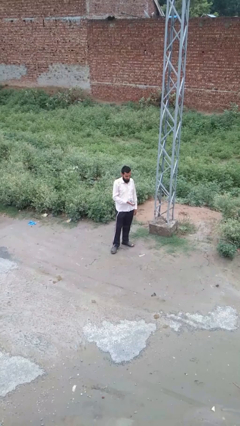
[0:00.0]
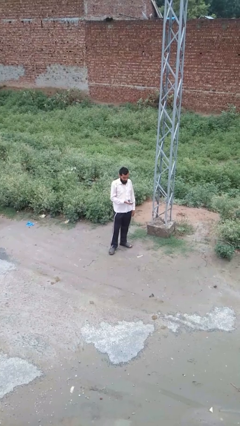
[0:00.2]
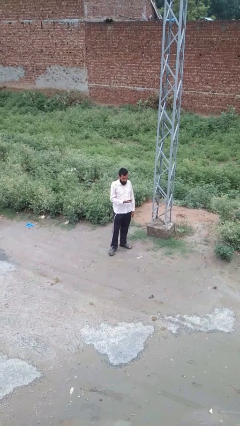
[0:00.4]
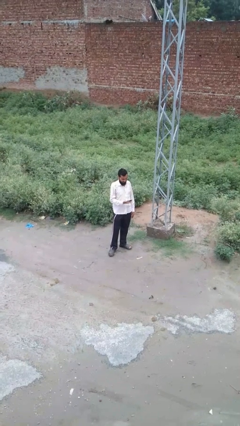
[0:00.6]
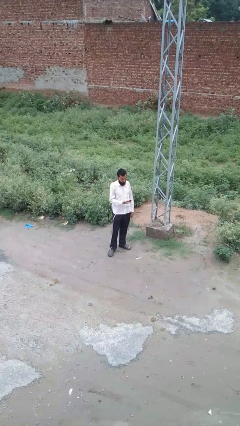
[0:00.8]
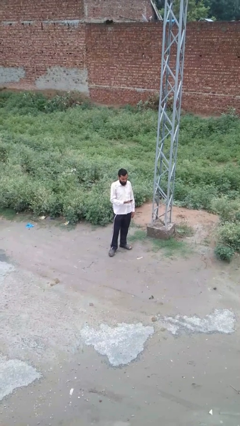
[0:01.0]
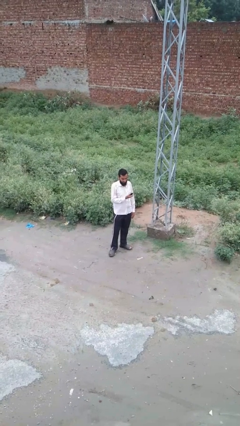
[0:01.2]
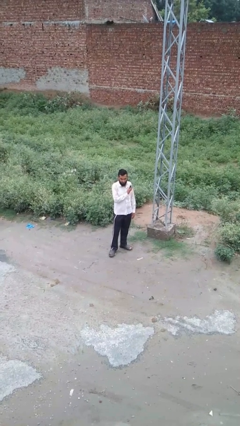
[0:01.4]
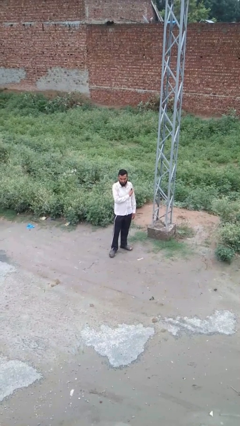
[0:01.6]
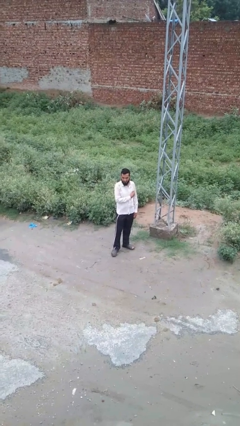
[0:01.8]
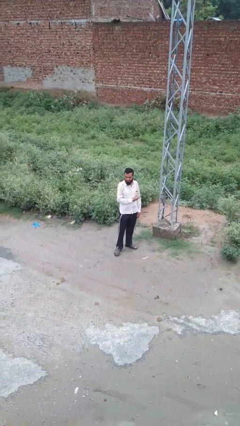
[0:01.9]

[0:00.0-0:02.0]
person puts phone into pocket

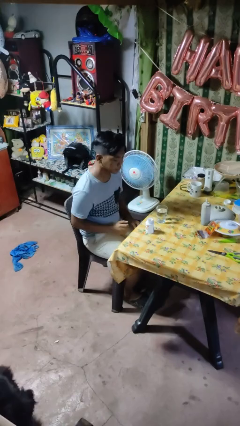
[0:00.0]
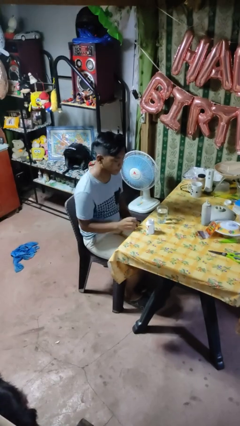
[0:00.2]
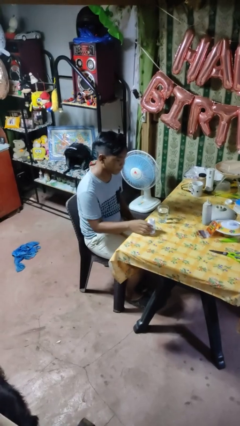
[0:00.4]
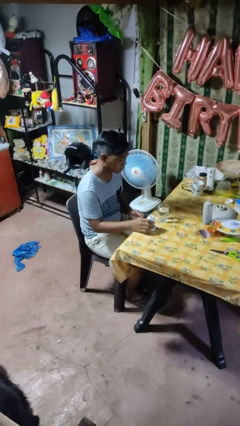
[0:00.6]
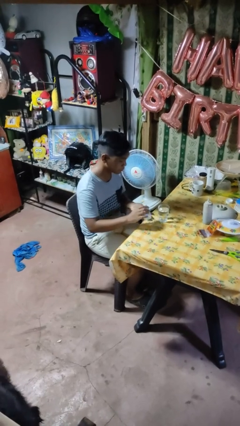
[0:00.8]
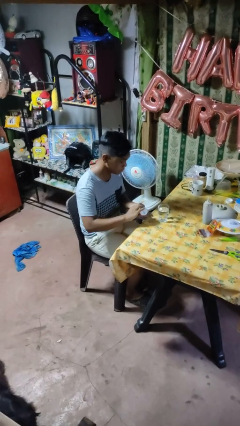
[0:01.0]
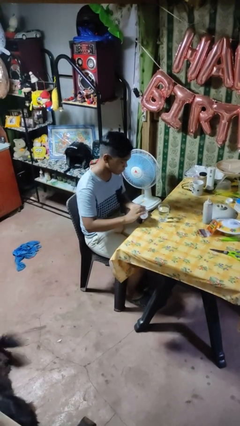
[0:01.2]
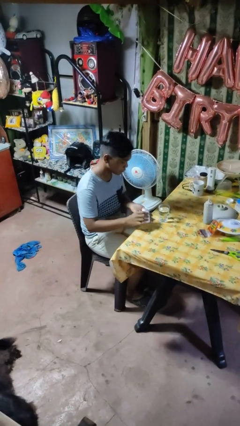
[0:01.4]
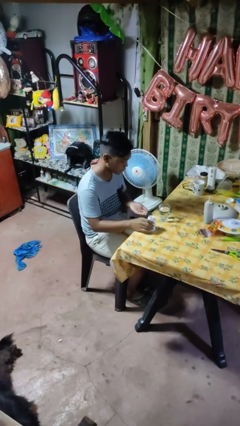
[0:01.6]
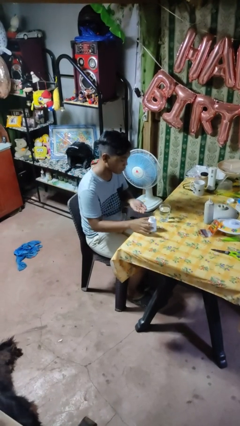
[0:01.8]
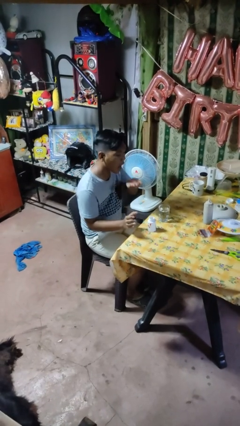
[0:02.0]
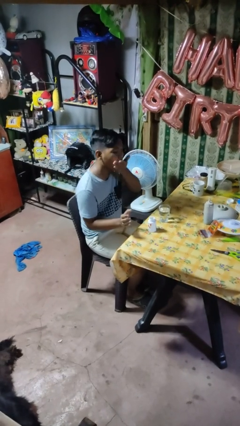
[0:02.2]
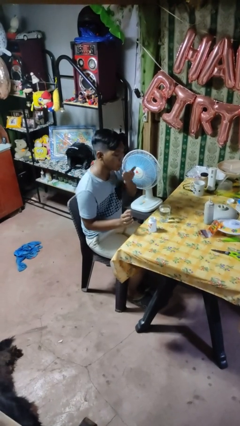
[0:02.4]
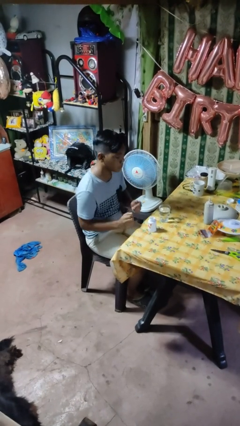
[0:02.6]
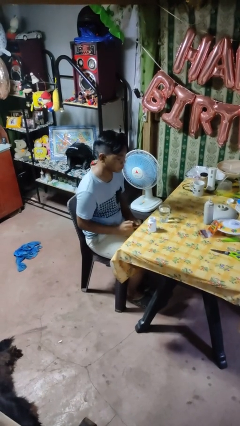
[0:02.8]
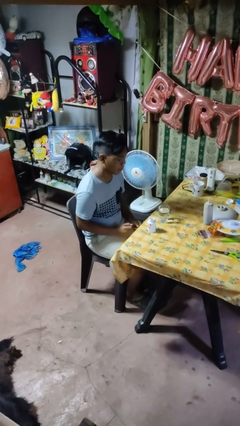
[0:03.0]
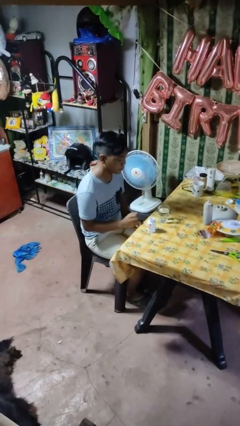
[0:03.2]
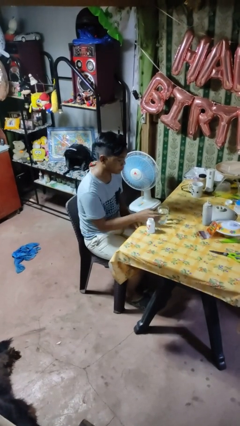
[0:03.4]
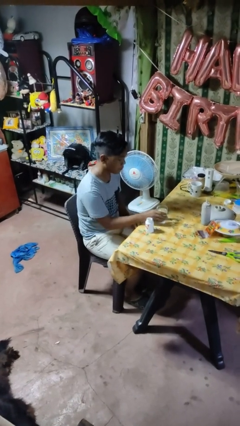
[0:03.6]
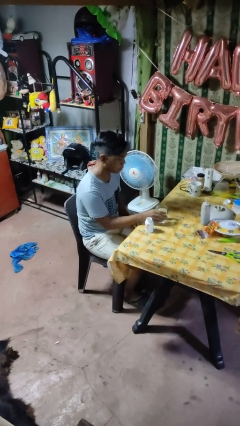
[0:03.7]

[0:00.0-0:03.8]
person takes medicine pills

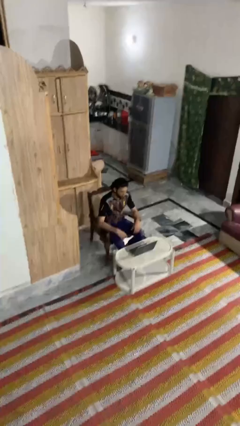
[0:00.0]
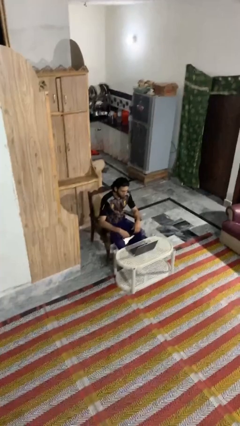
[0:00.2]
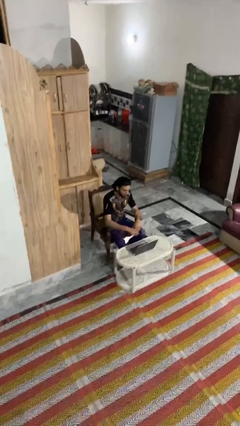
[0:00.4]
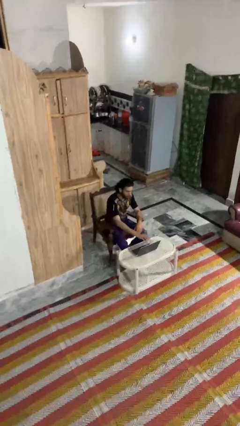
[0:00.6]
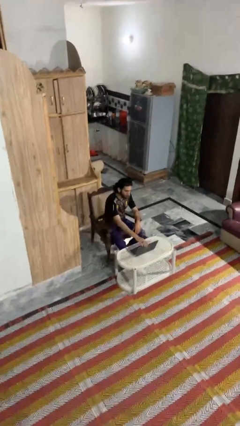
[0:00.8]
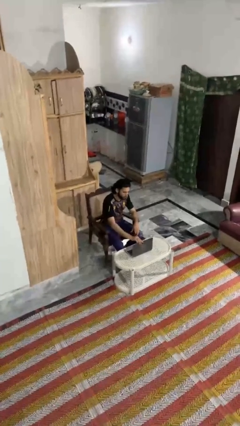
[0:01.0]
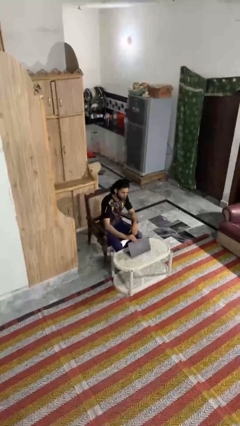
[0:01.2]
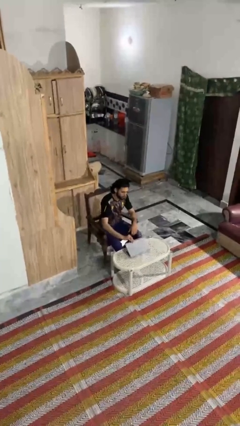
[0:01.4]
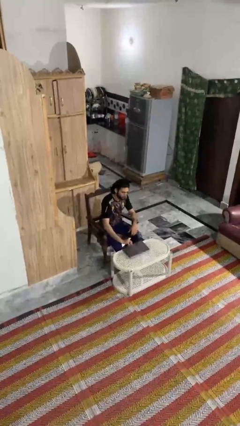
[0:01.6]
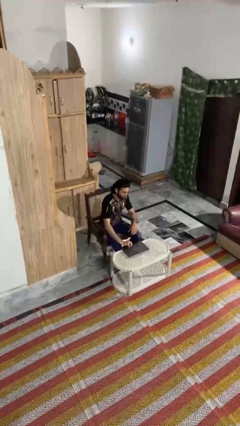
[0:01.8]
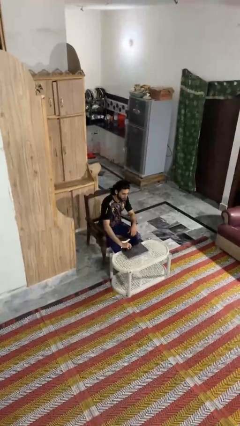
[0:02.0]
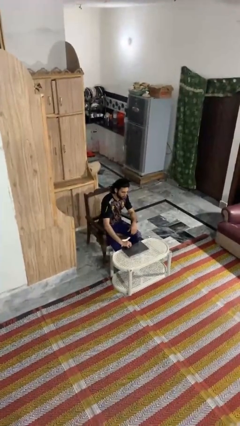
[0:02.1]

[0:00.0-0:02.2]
person closes laptop

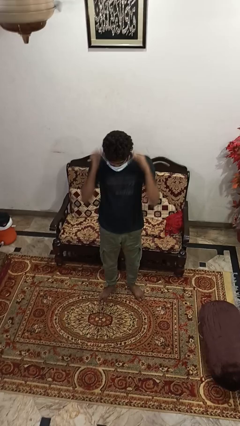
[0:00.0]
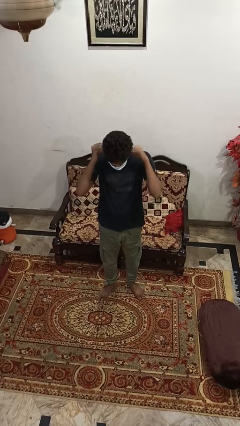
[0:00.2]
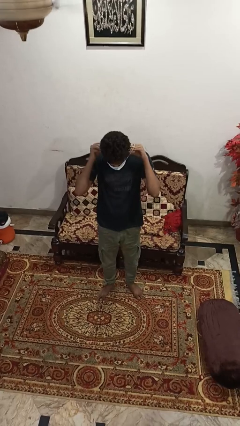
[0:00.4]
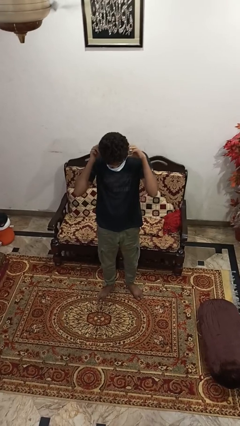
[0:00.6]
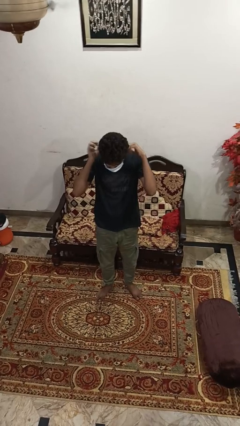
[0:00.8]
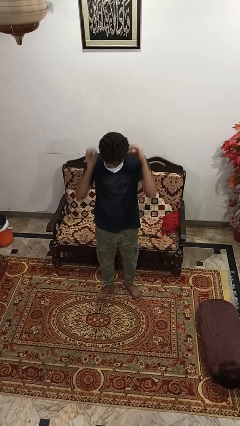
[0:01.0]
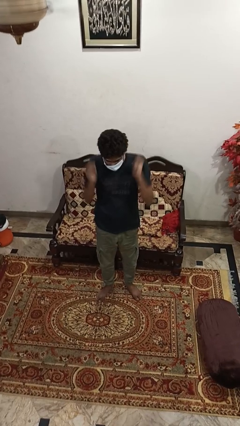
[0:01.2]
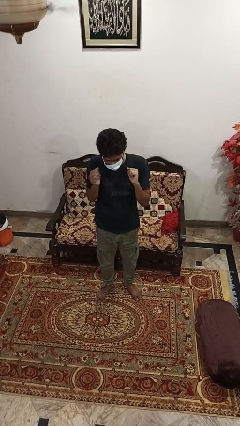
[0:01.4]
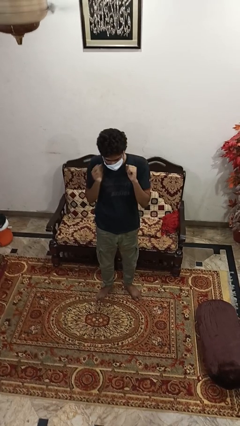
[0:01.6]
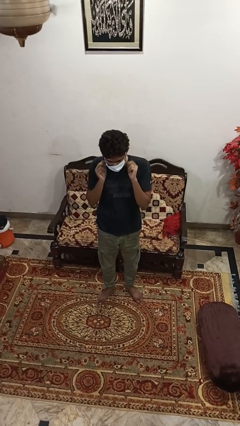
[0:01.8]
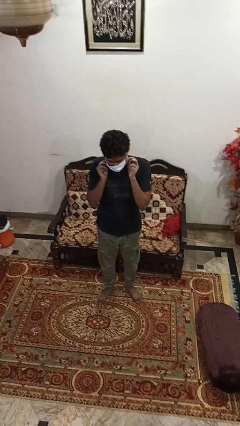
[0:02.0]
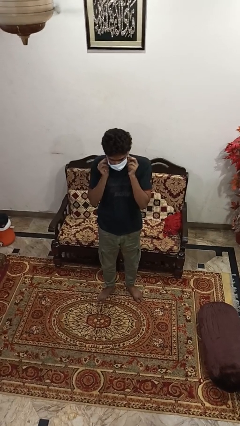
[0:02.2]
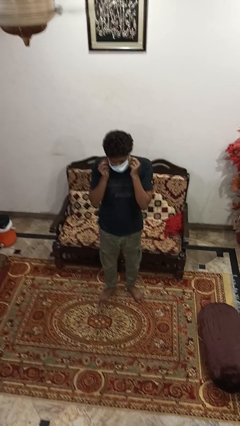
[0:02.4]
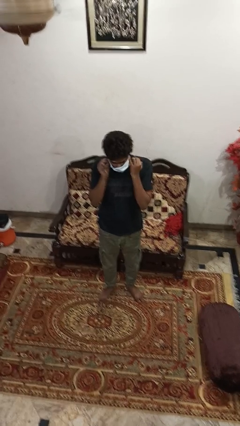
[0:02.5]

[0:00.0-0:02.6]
person puts on facemask

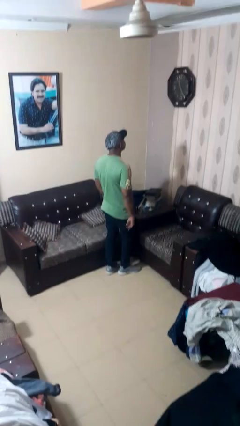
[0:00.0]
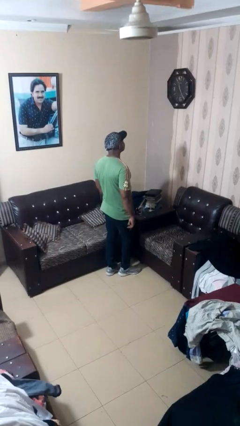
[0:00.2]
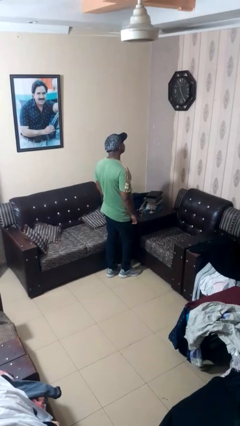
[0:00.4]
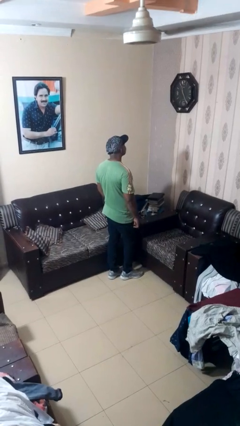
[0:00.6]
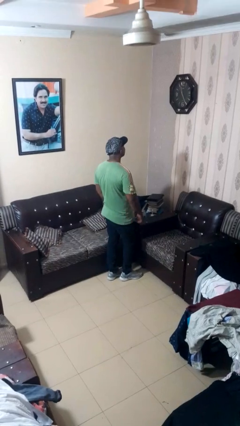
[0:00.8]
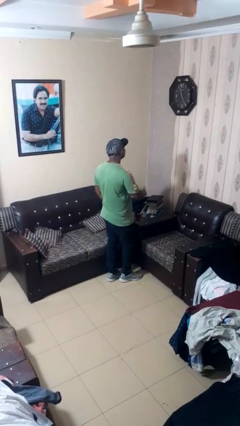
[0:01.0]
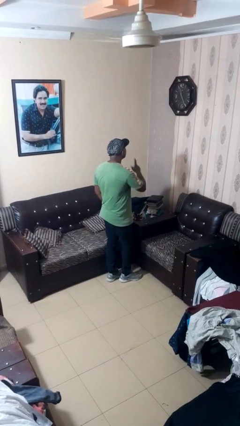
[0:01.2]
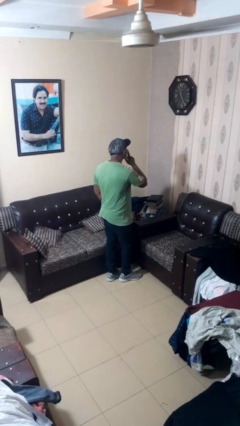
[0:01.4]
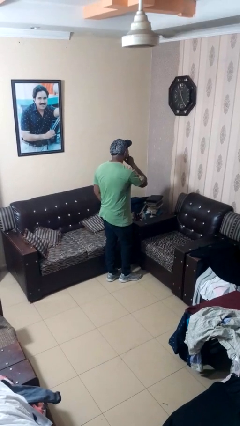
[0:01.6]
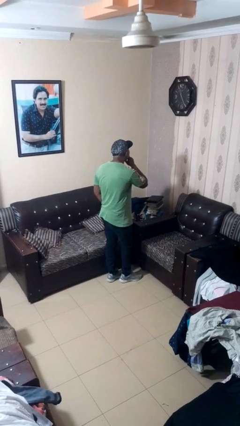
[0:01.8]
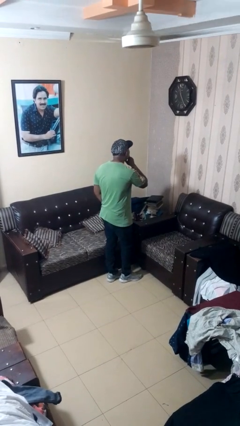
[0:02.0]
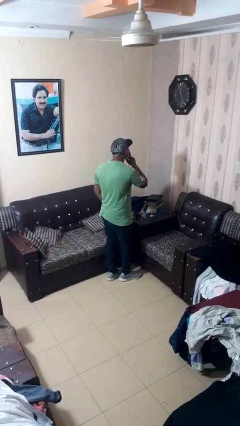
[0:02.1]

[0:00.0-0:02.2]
person gestures be quiet

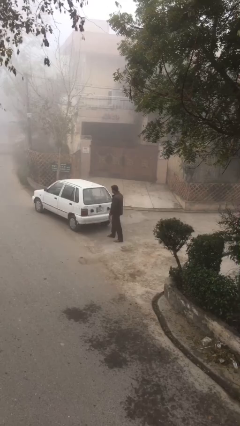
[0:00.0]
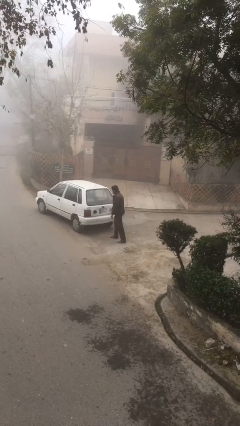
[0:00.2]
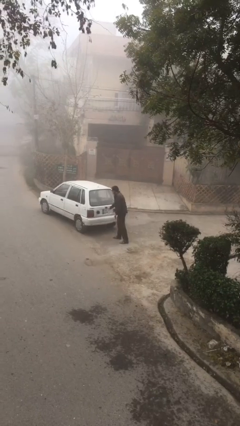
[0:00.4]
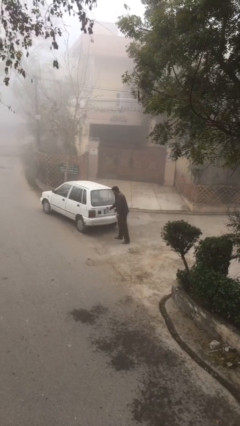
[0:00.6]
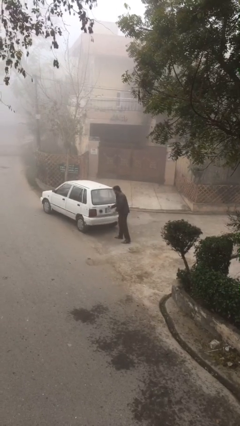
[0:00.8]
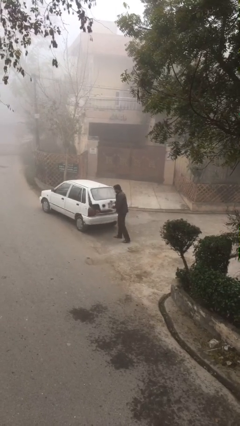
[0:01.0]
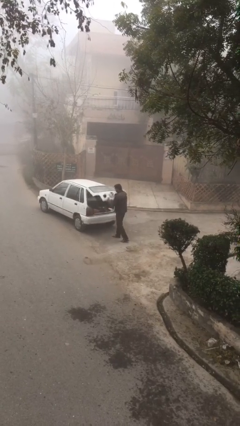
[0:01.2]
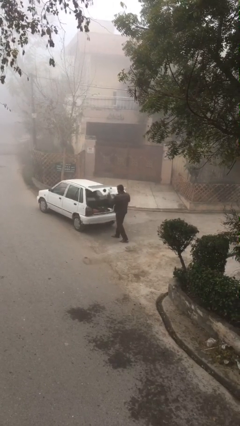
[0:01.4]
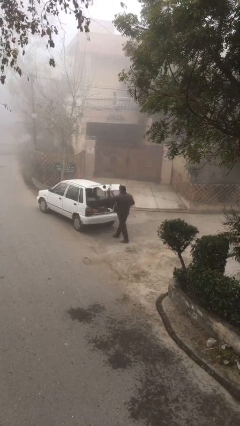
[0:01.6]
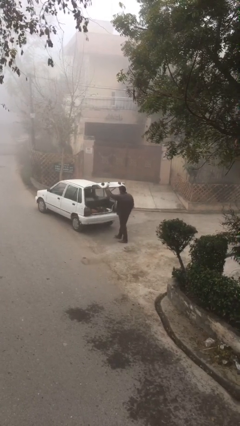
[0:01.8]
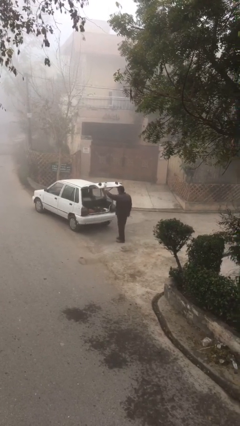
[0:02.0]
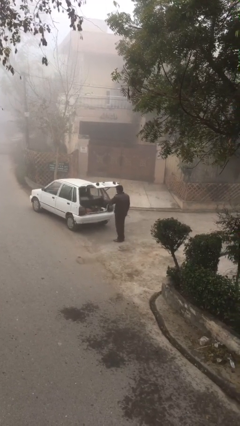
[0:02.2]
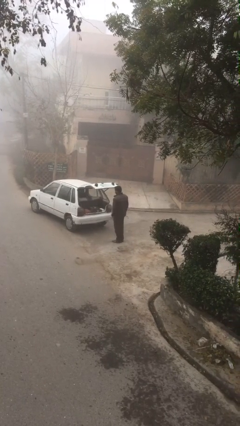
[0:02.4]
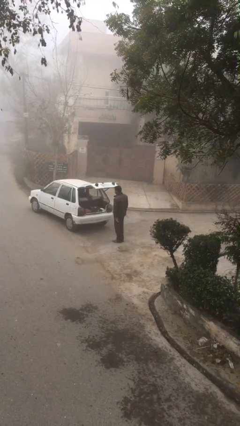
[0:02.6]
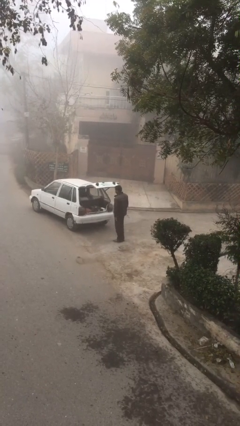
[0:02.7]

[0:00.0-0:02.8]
person opens car trunk

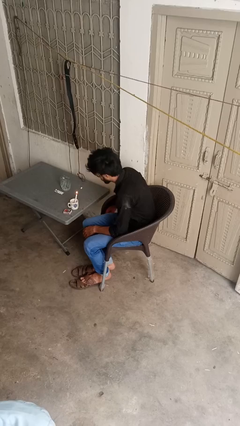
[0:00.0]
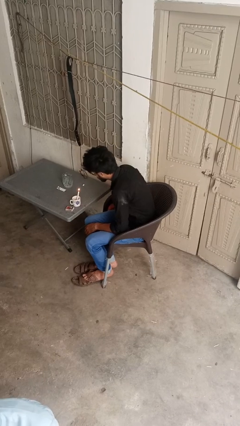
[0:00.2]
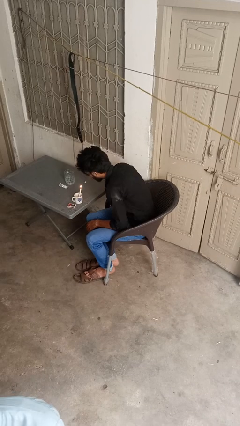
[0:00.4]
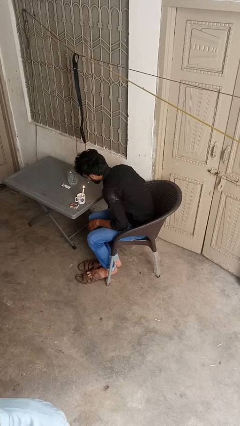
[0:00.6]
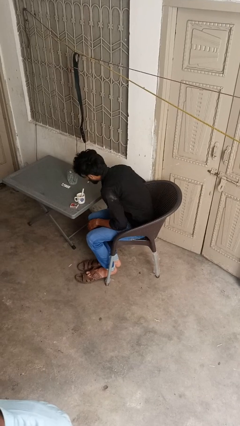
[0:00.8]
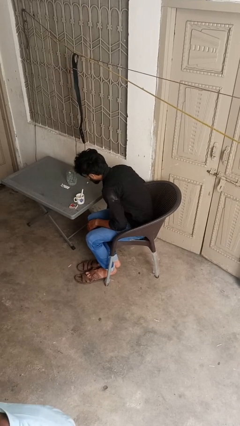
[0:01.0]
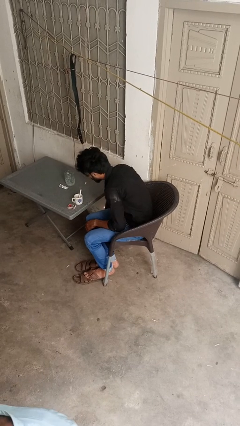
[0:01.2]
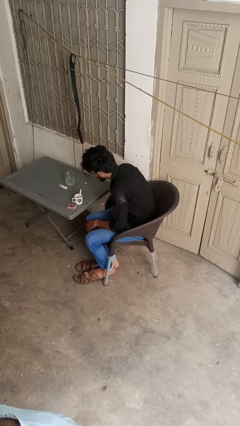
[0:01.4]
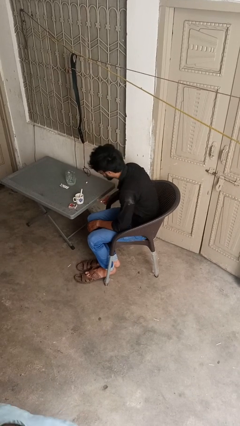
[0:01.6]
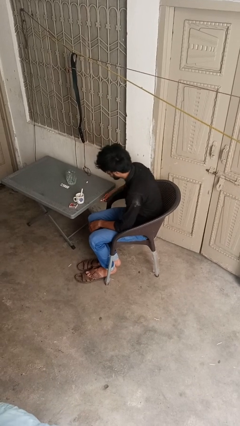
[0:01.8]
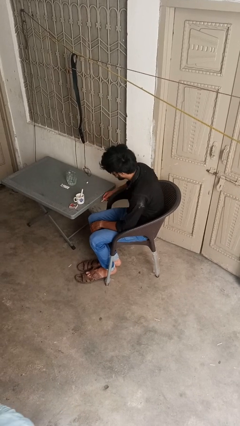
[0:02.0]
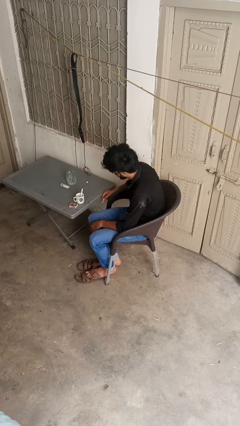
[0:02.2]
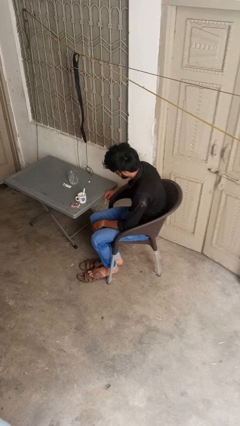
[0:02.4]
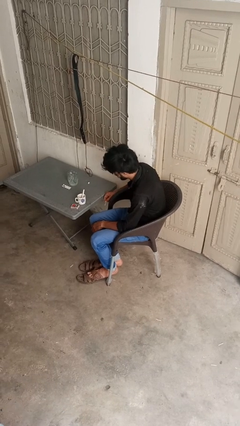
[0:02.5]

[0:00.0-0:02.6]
person extinguishes candle
